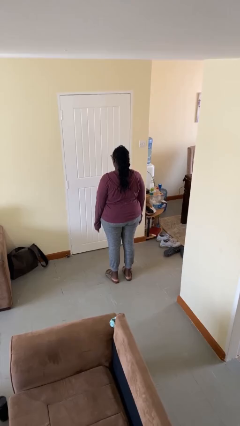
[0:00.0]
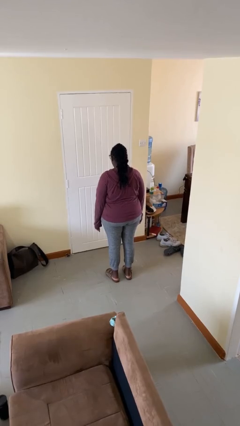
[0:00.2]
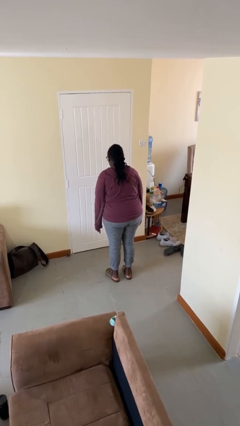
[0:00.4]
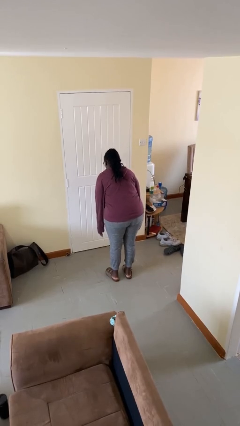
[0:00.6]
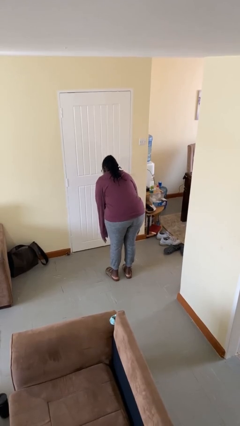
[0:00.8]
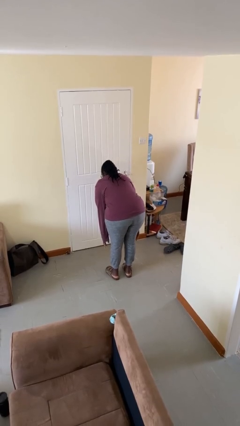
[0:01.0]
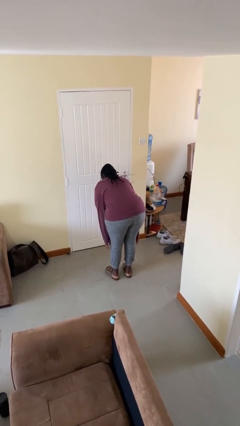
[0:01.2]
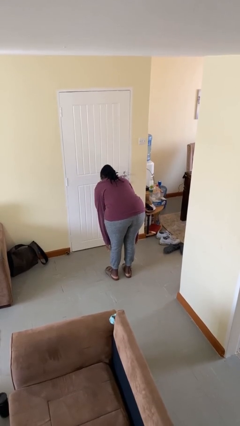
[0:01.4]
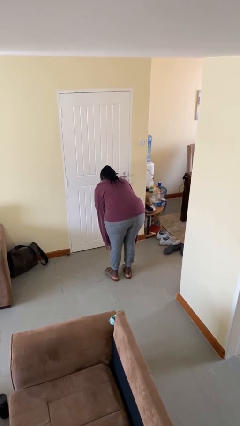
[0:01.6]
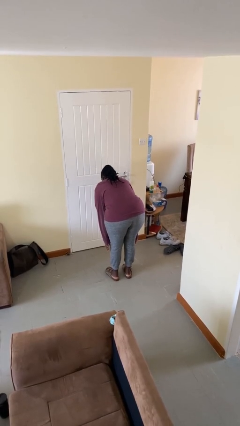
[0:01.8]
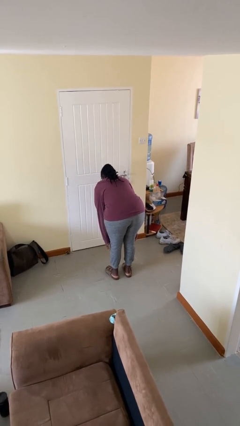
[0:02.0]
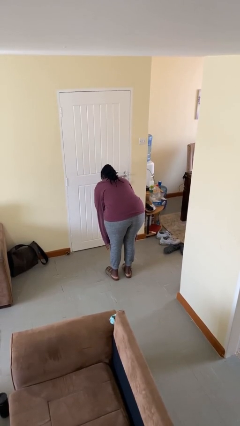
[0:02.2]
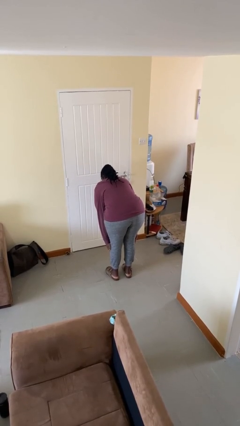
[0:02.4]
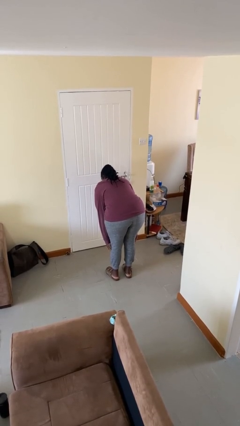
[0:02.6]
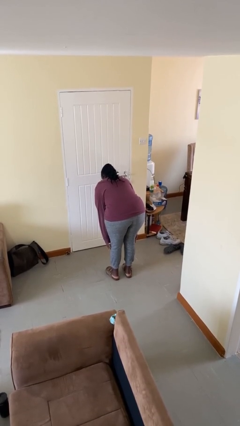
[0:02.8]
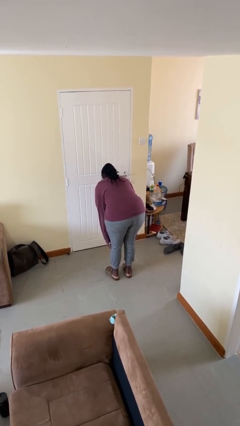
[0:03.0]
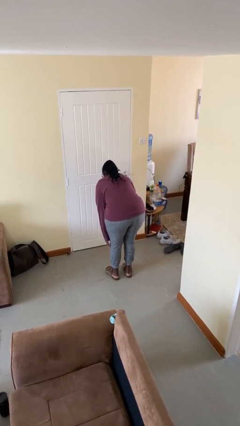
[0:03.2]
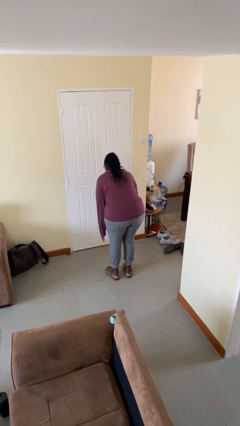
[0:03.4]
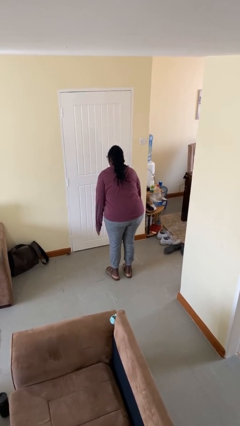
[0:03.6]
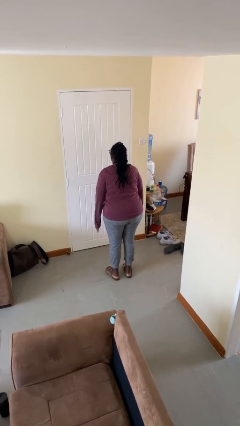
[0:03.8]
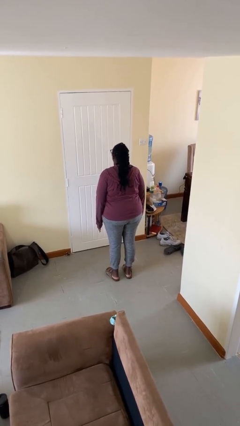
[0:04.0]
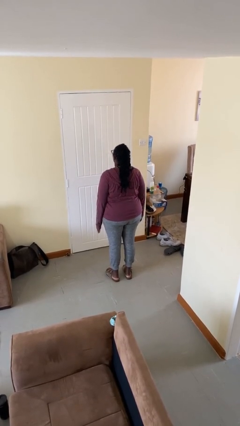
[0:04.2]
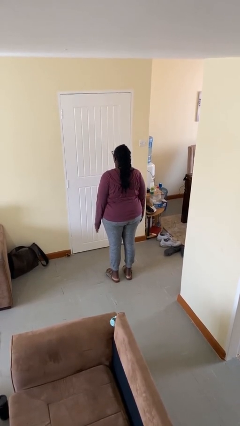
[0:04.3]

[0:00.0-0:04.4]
person bows

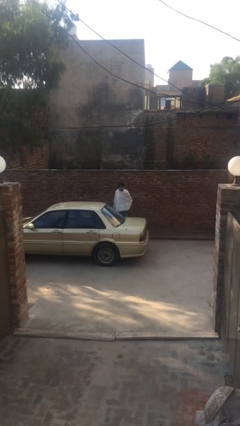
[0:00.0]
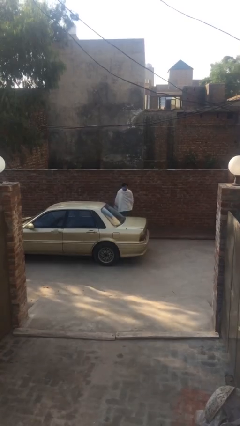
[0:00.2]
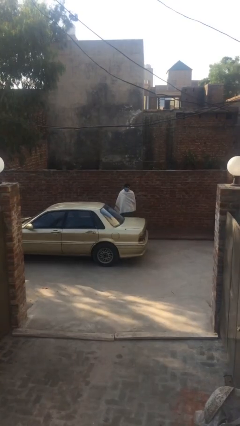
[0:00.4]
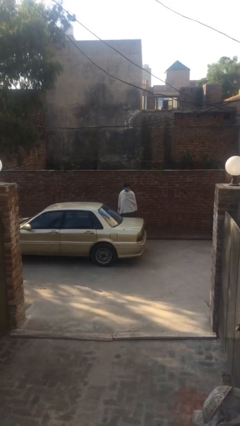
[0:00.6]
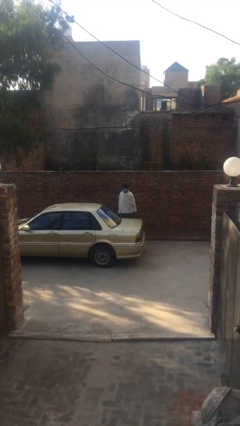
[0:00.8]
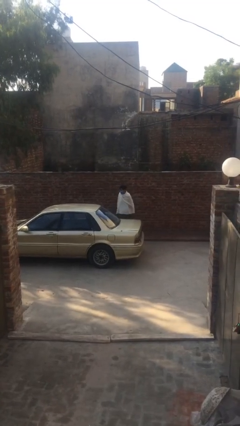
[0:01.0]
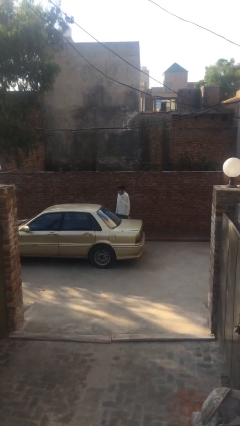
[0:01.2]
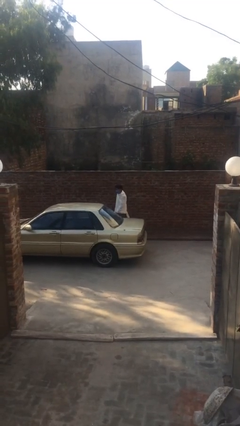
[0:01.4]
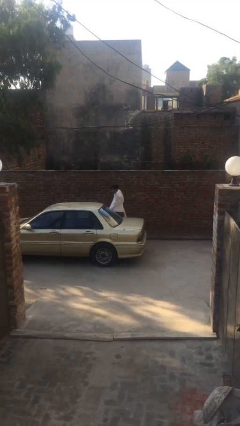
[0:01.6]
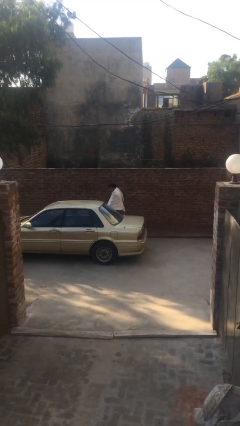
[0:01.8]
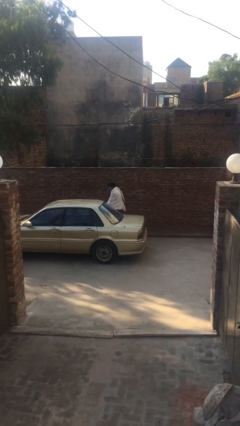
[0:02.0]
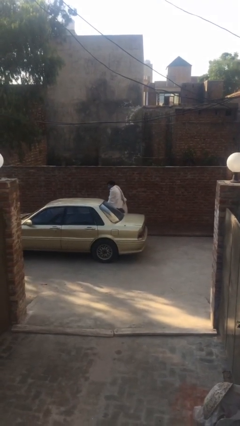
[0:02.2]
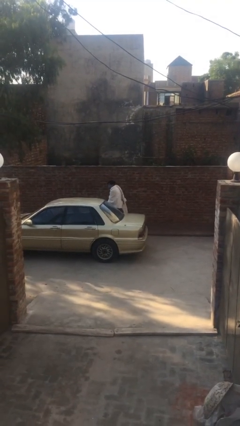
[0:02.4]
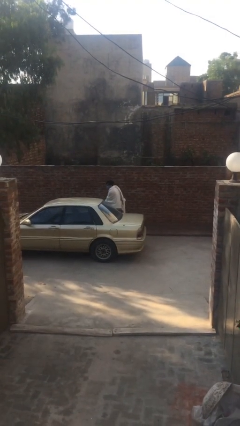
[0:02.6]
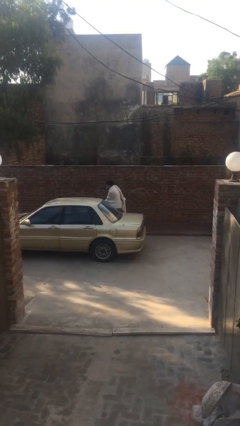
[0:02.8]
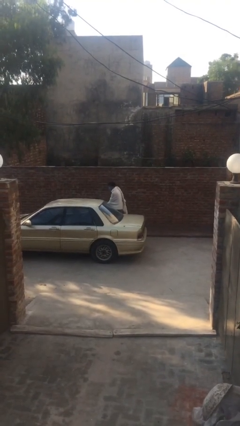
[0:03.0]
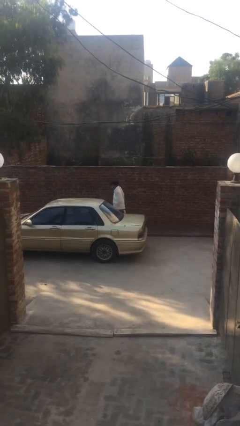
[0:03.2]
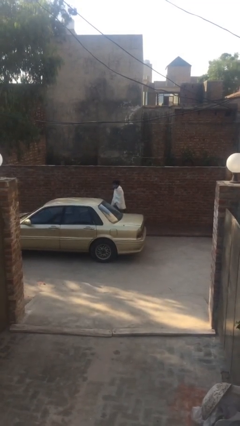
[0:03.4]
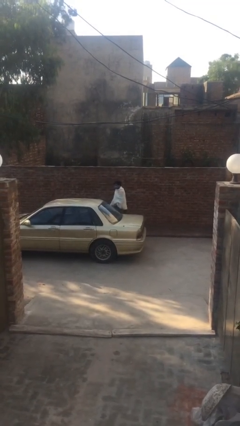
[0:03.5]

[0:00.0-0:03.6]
person opens car door

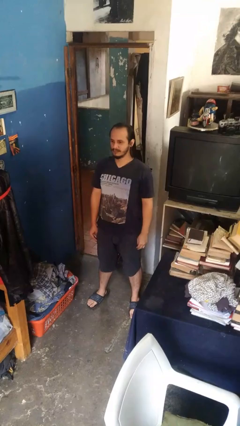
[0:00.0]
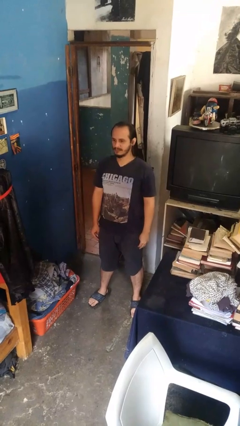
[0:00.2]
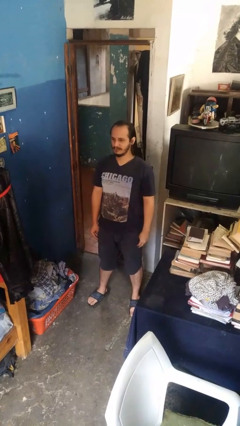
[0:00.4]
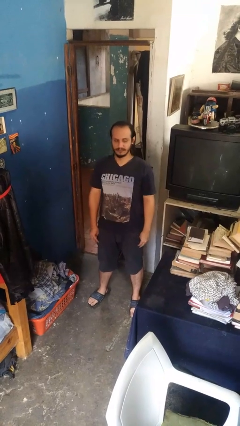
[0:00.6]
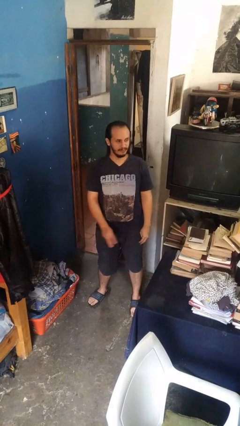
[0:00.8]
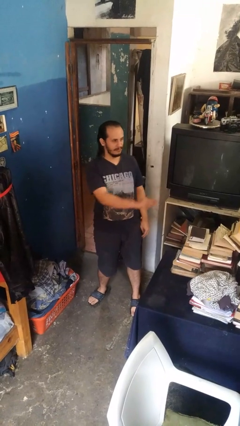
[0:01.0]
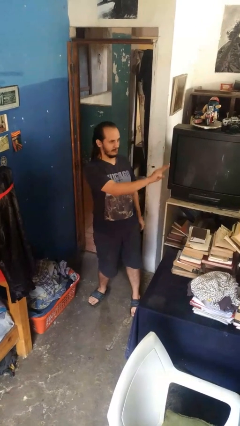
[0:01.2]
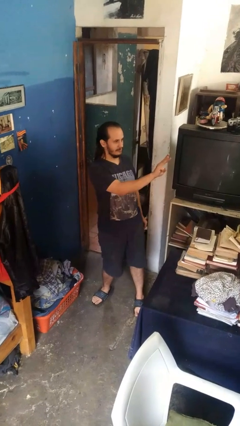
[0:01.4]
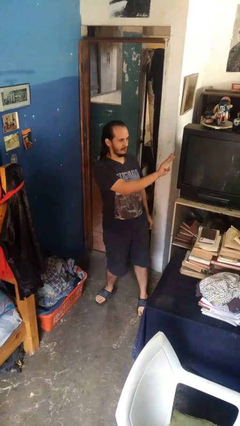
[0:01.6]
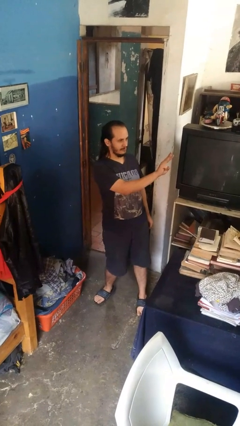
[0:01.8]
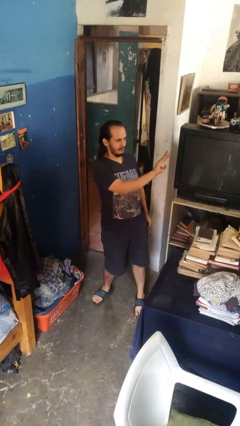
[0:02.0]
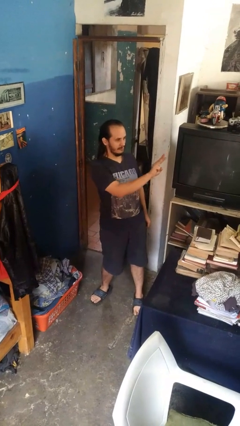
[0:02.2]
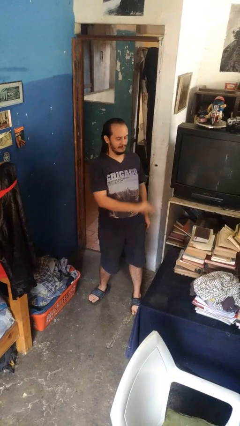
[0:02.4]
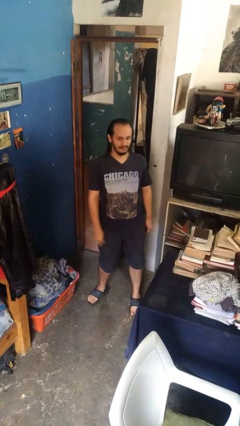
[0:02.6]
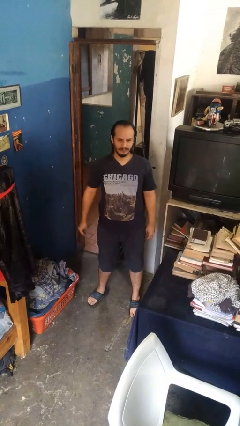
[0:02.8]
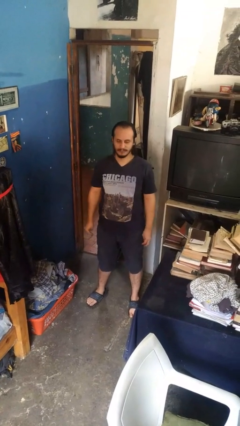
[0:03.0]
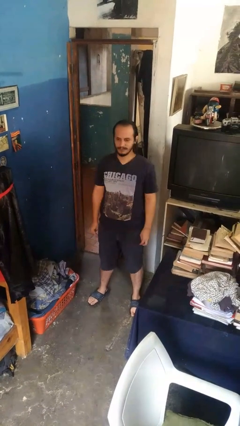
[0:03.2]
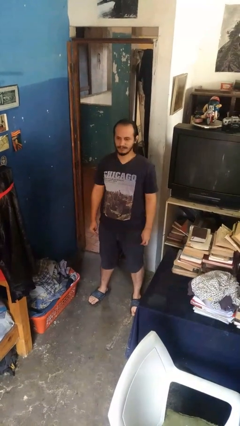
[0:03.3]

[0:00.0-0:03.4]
person gestures number three

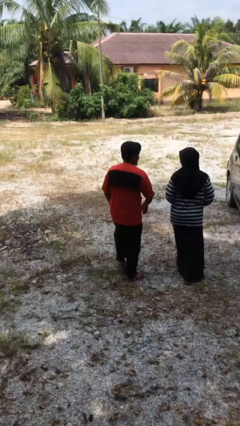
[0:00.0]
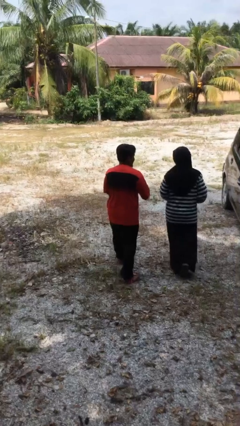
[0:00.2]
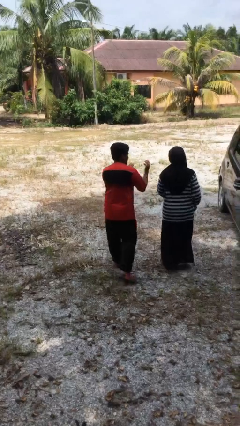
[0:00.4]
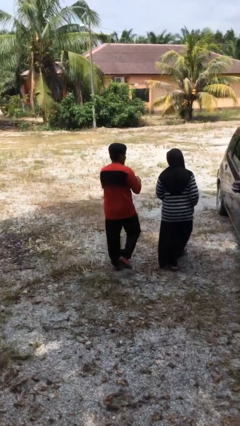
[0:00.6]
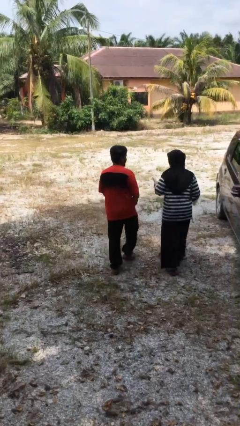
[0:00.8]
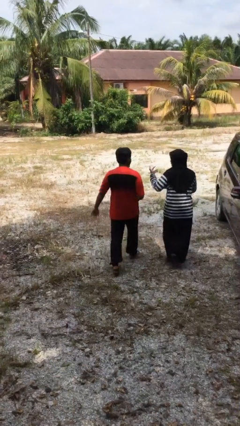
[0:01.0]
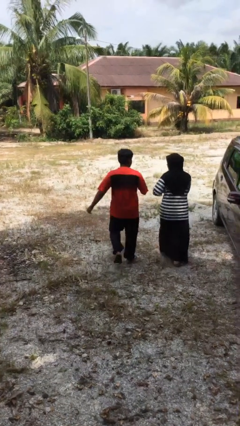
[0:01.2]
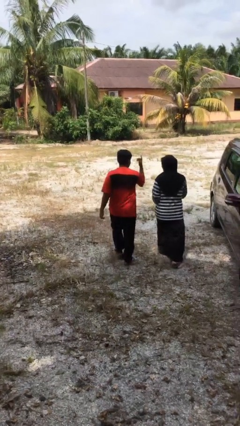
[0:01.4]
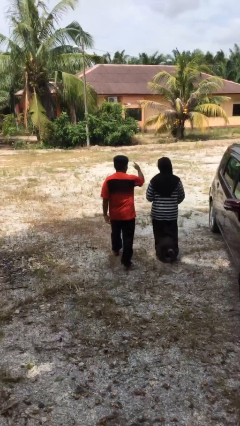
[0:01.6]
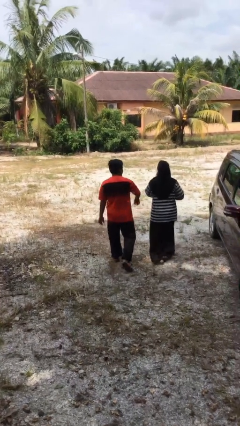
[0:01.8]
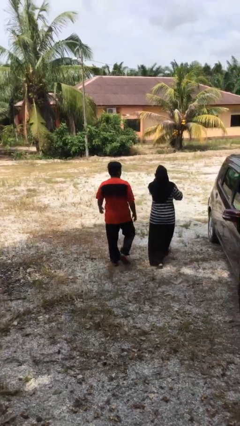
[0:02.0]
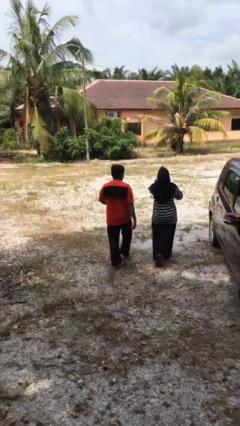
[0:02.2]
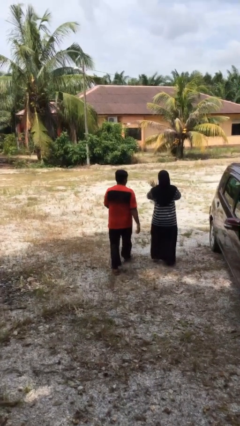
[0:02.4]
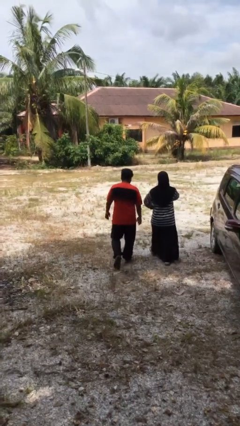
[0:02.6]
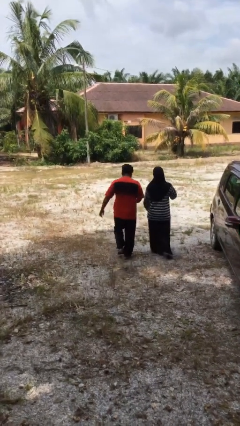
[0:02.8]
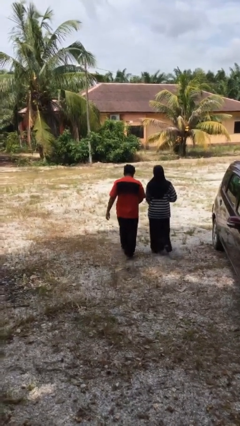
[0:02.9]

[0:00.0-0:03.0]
person talks to person

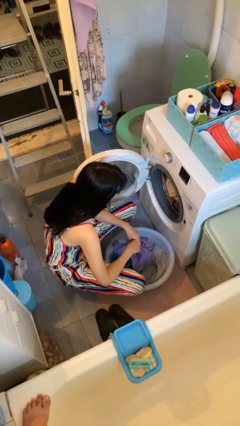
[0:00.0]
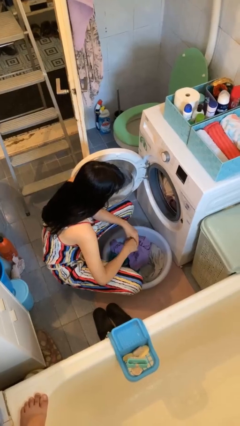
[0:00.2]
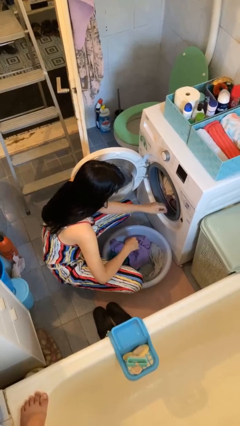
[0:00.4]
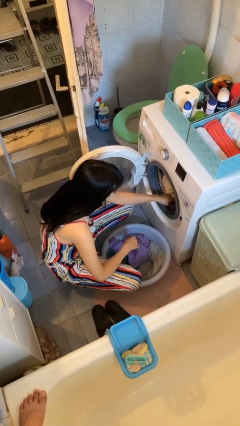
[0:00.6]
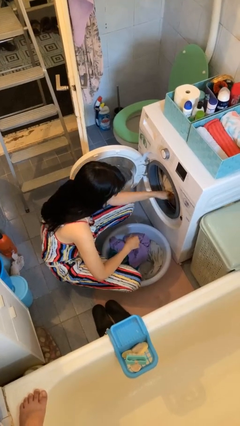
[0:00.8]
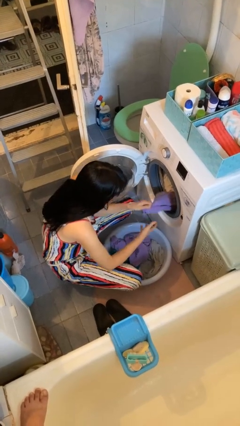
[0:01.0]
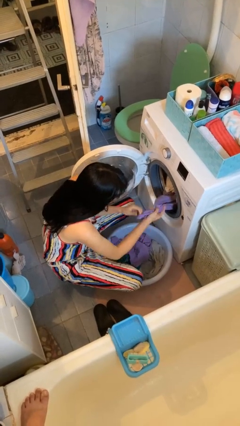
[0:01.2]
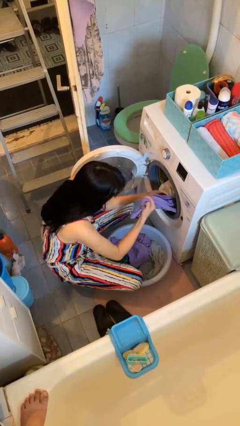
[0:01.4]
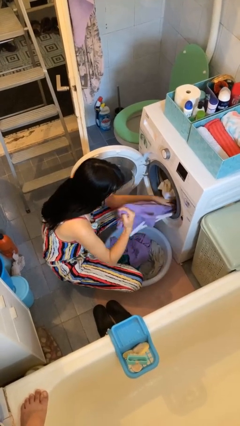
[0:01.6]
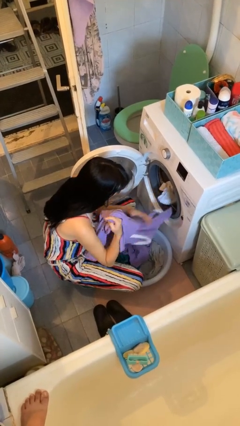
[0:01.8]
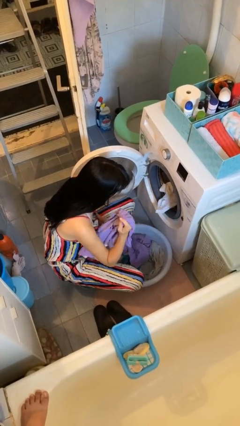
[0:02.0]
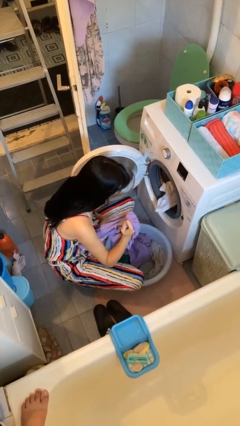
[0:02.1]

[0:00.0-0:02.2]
person loads clotheswasher

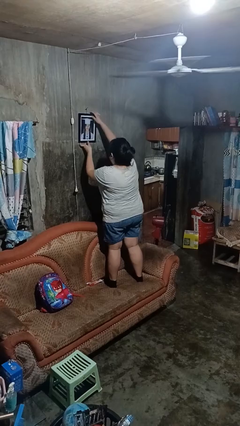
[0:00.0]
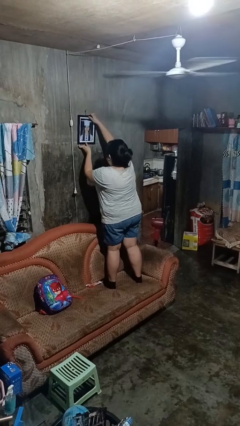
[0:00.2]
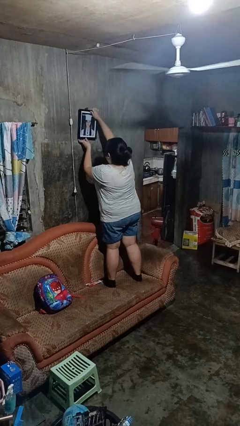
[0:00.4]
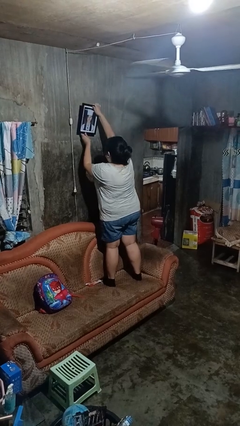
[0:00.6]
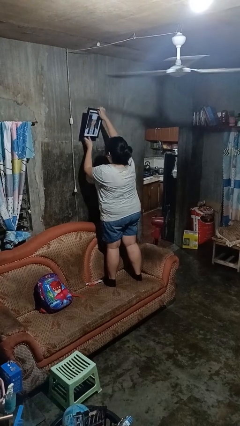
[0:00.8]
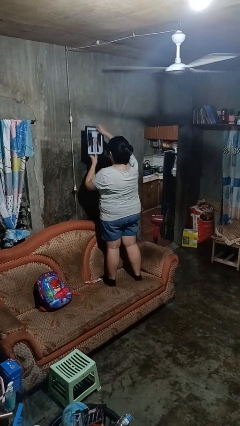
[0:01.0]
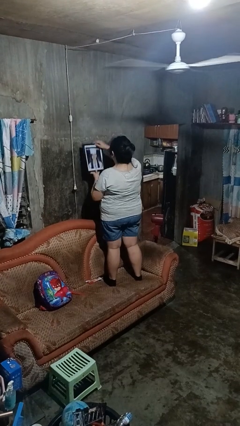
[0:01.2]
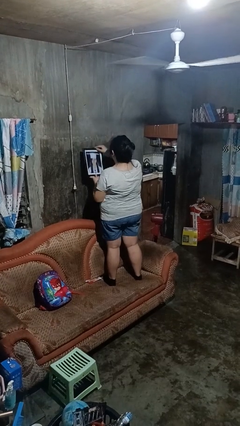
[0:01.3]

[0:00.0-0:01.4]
person takes down picture frame
